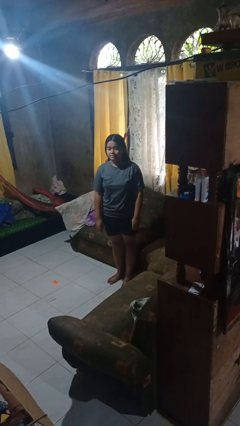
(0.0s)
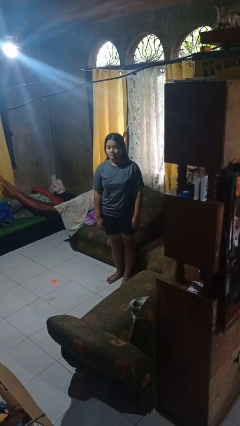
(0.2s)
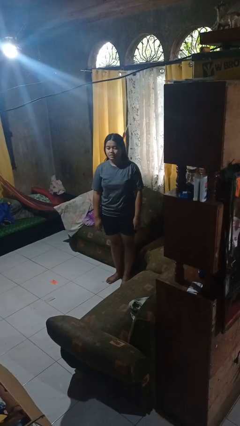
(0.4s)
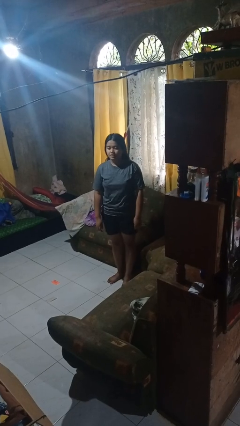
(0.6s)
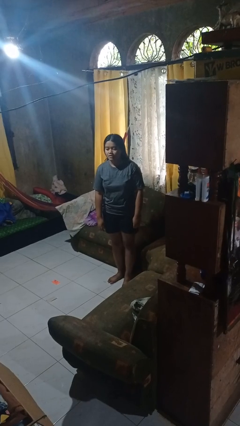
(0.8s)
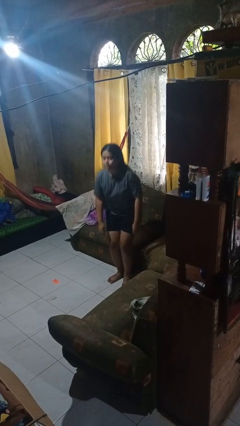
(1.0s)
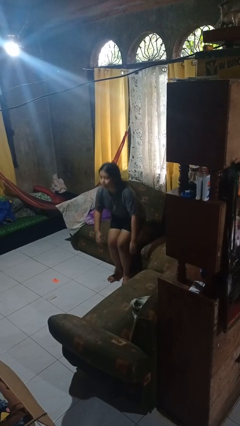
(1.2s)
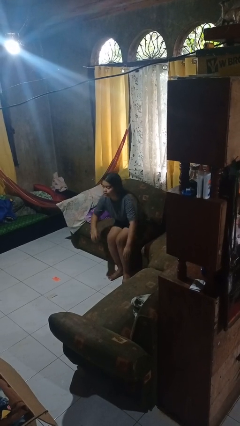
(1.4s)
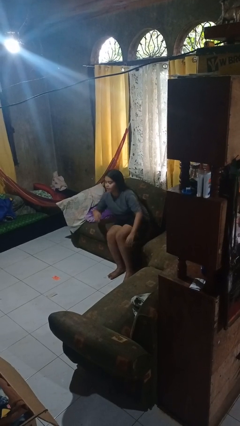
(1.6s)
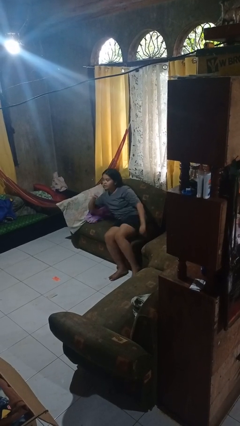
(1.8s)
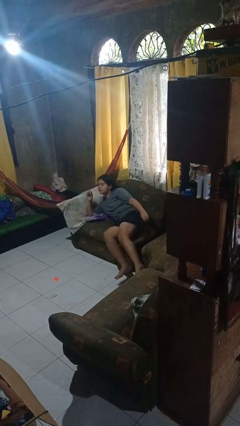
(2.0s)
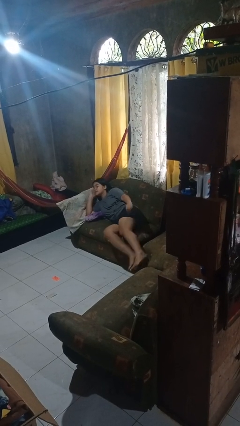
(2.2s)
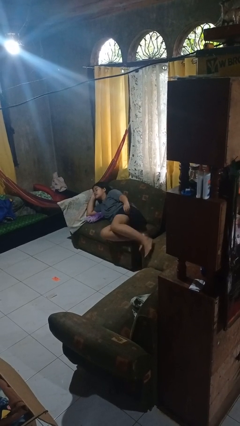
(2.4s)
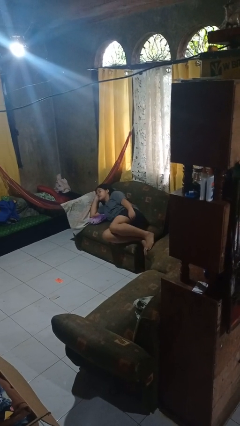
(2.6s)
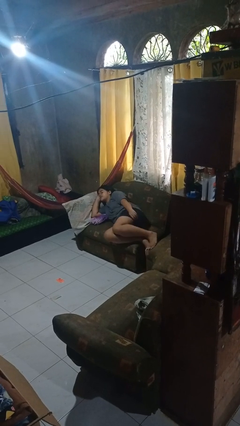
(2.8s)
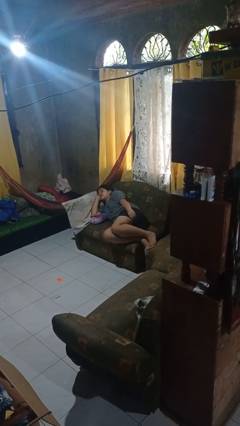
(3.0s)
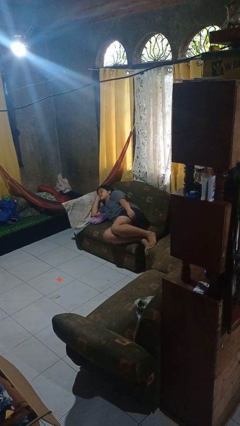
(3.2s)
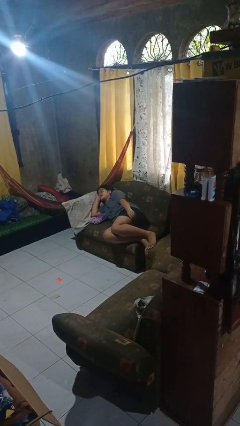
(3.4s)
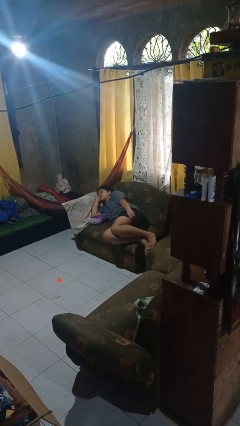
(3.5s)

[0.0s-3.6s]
person lies down on couch

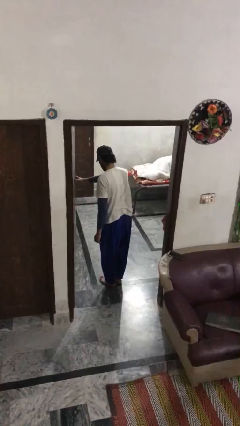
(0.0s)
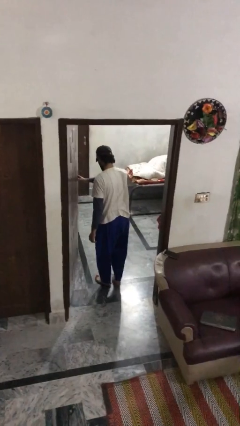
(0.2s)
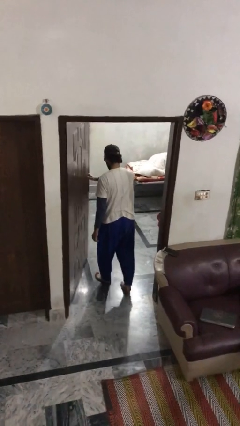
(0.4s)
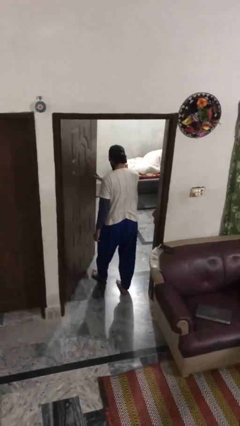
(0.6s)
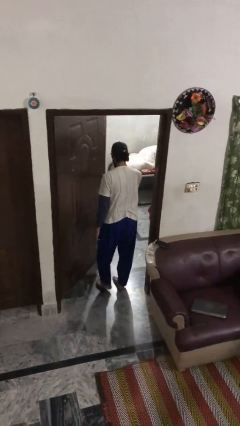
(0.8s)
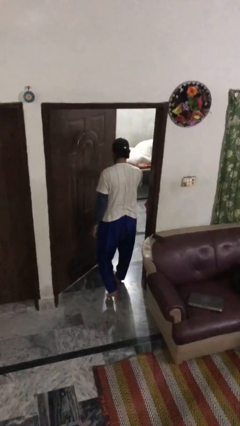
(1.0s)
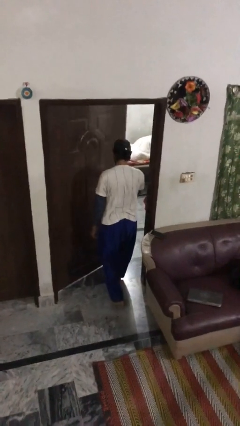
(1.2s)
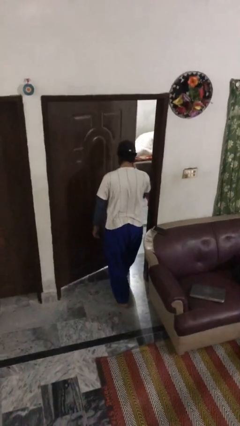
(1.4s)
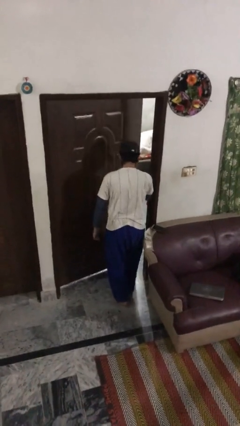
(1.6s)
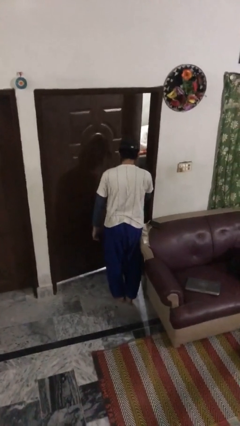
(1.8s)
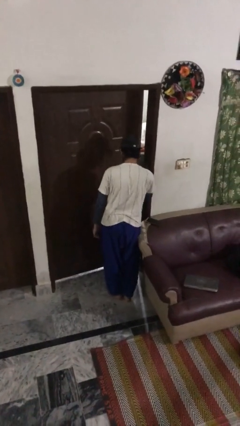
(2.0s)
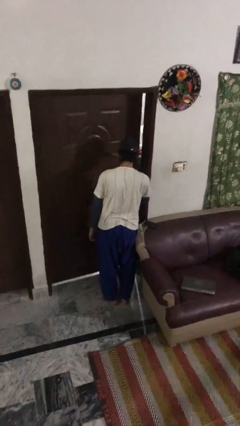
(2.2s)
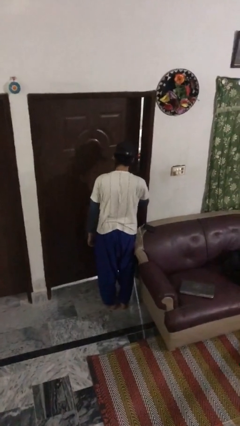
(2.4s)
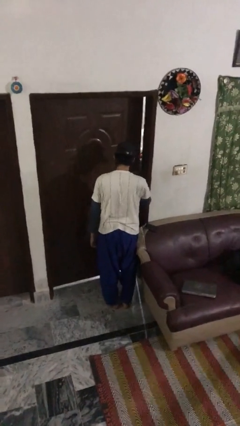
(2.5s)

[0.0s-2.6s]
person closes facility door

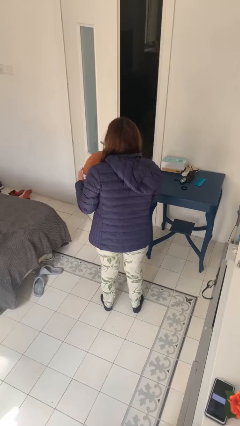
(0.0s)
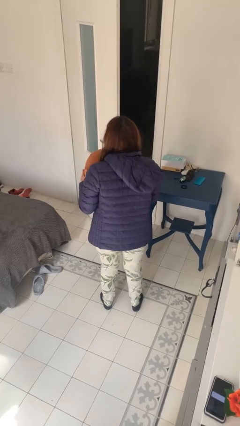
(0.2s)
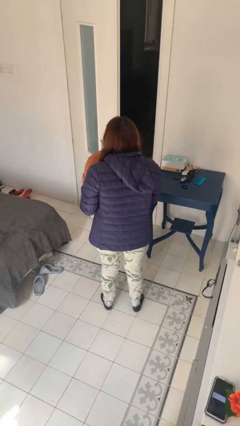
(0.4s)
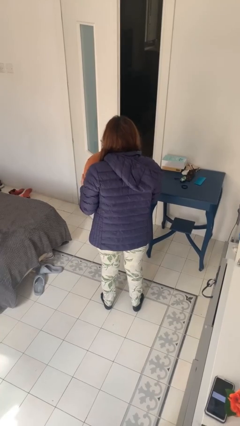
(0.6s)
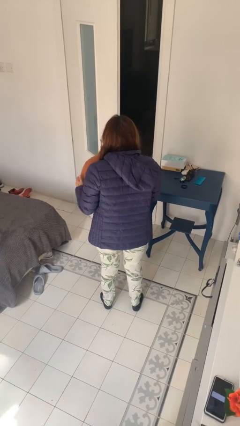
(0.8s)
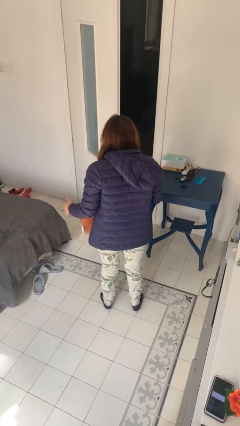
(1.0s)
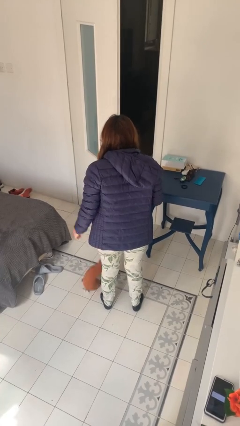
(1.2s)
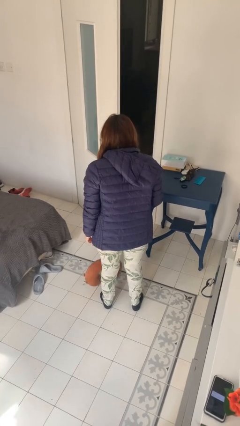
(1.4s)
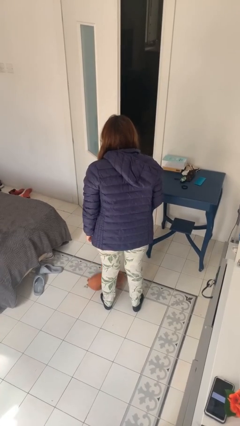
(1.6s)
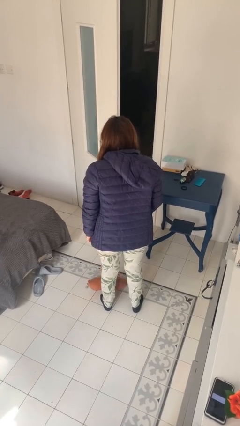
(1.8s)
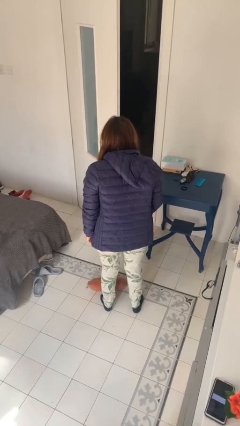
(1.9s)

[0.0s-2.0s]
person throws object into air

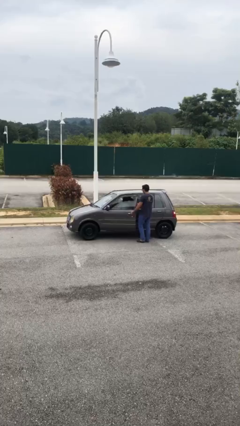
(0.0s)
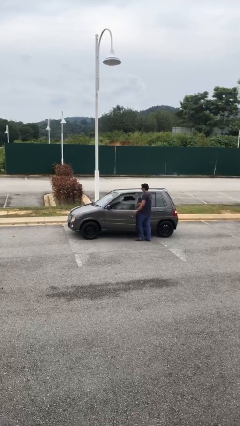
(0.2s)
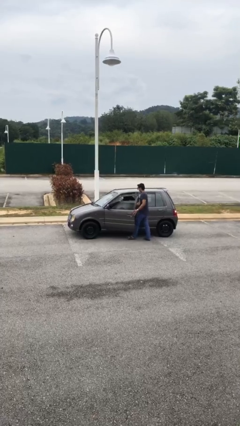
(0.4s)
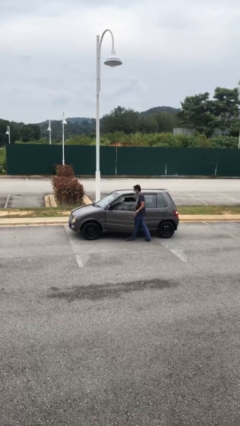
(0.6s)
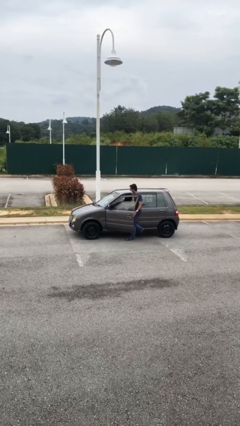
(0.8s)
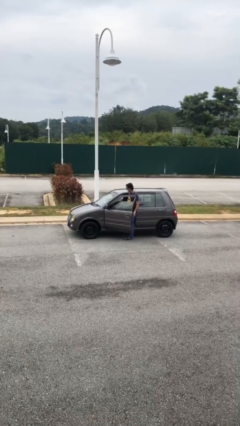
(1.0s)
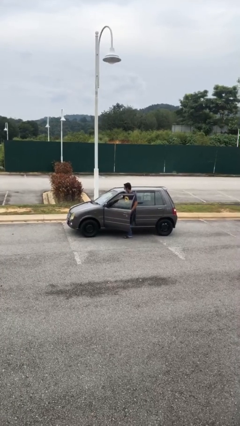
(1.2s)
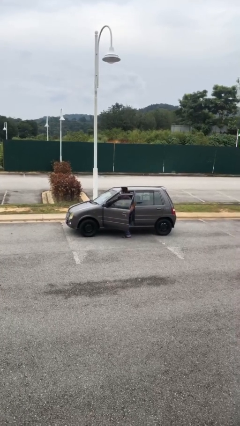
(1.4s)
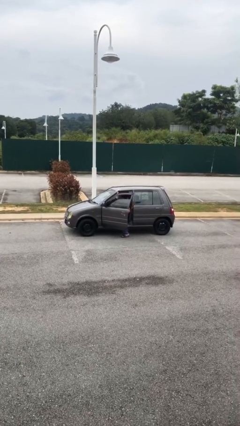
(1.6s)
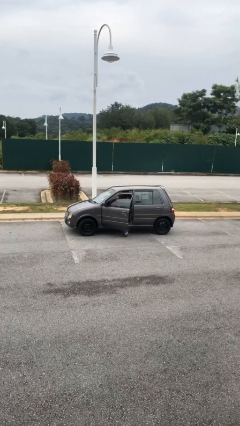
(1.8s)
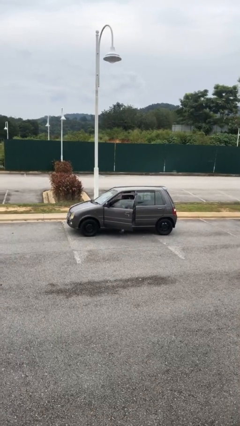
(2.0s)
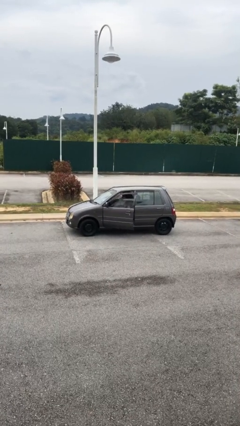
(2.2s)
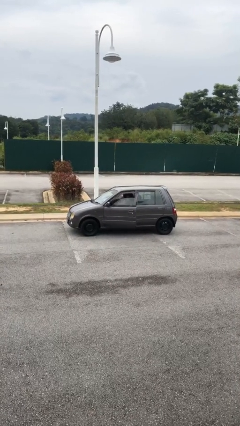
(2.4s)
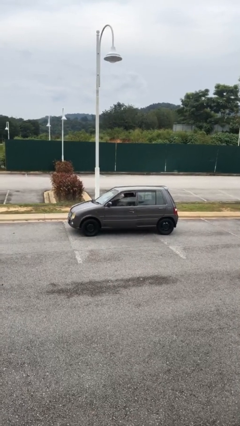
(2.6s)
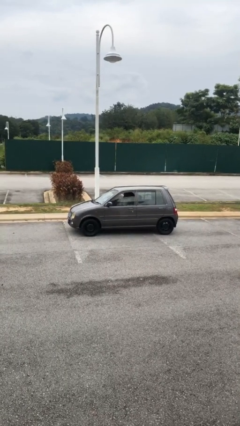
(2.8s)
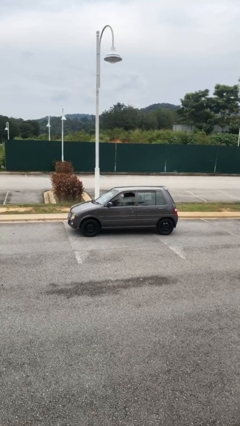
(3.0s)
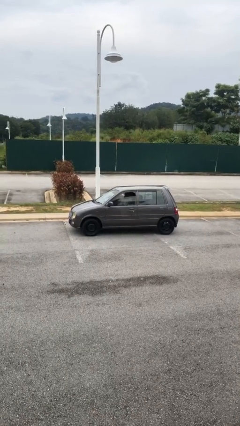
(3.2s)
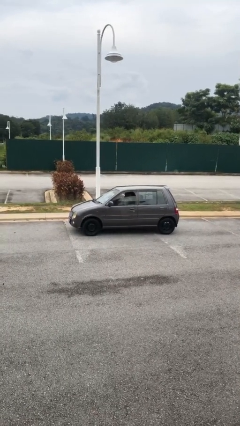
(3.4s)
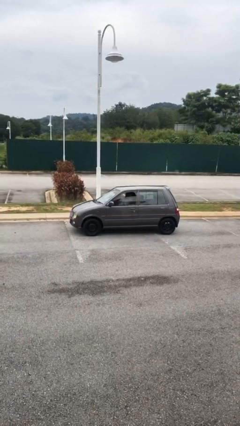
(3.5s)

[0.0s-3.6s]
car picks up person

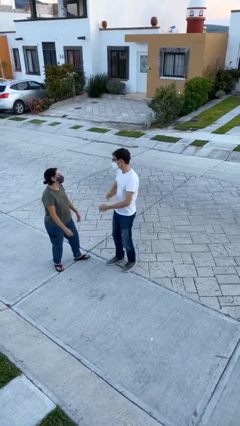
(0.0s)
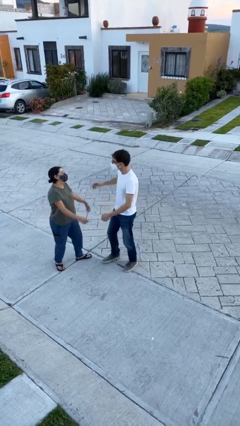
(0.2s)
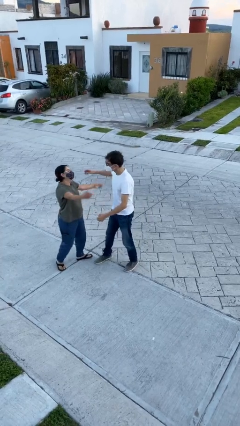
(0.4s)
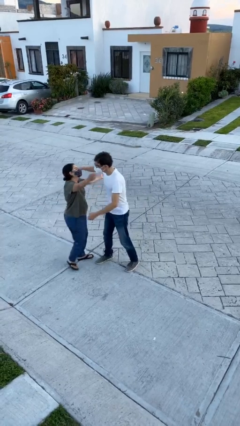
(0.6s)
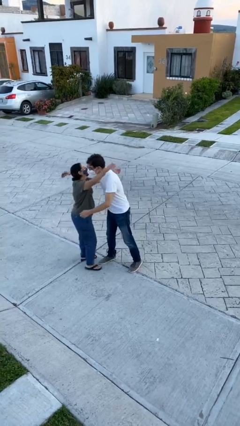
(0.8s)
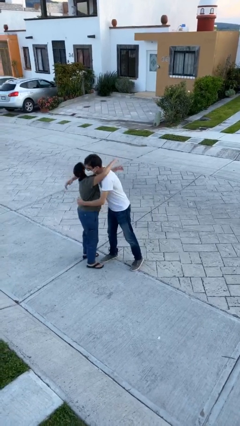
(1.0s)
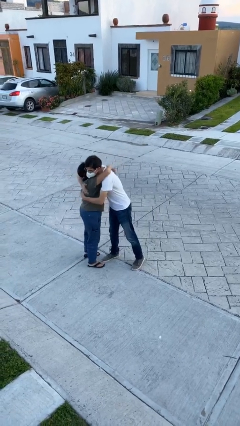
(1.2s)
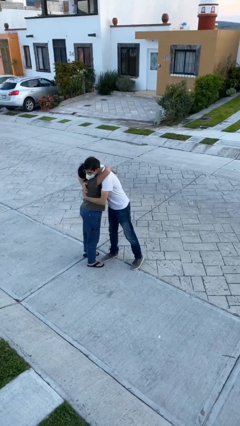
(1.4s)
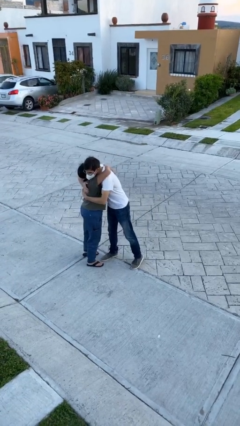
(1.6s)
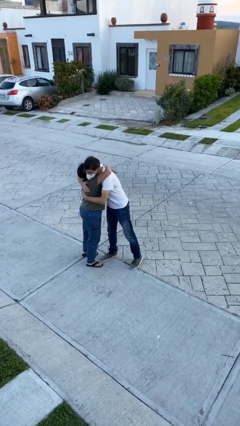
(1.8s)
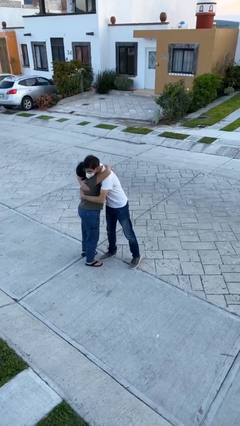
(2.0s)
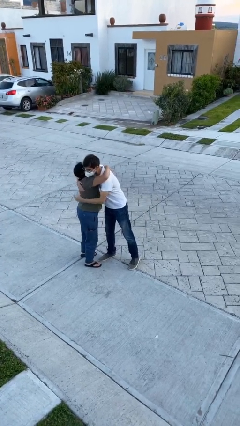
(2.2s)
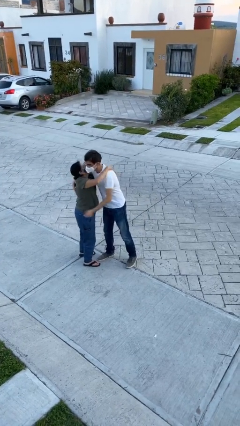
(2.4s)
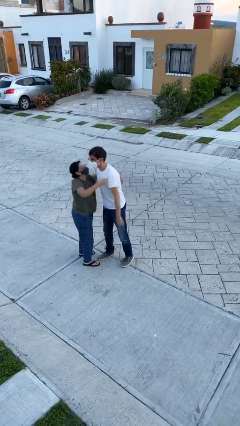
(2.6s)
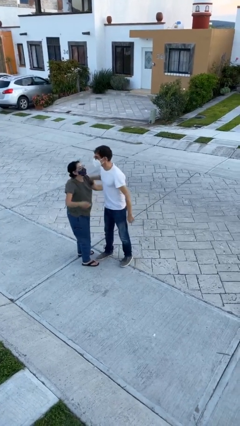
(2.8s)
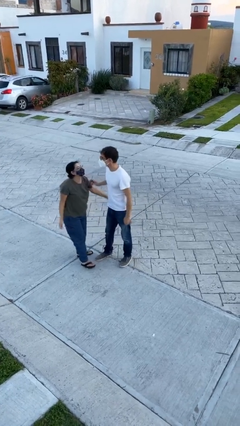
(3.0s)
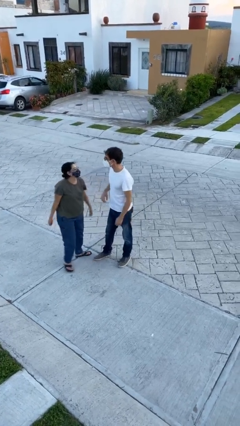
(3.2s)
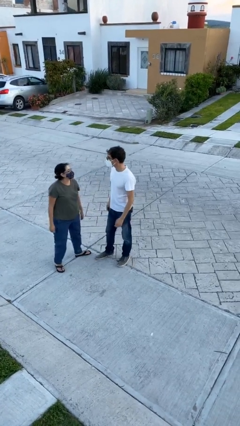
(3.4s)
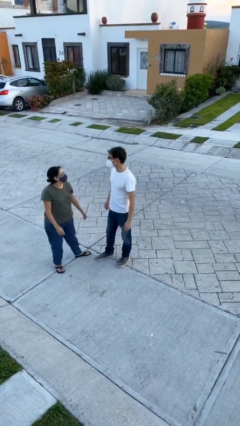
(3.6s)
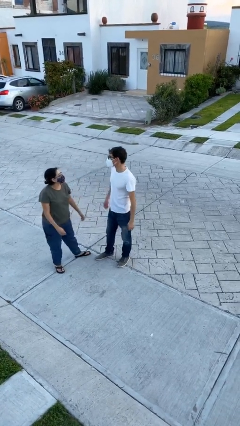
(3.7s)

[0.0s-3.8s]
person embraces person

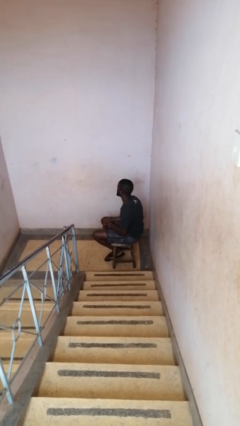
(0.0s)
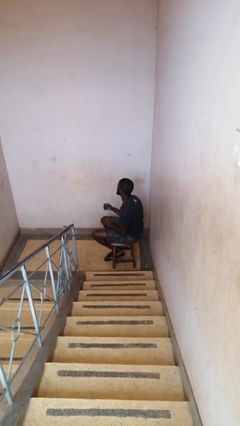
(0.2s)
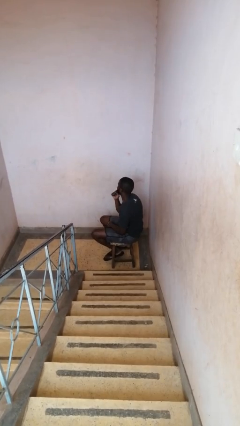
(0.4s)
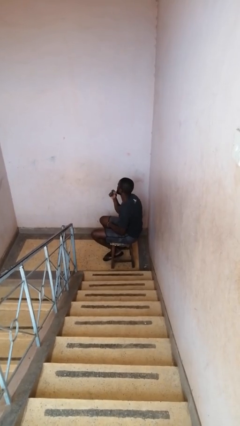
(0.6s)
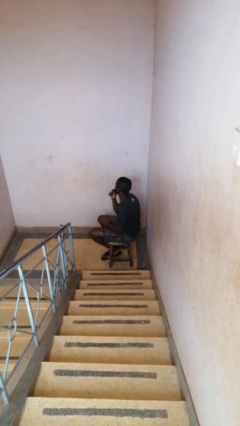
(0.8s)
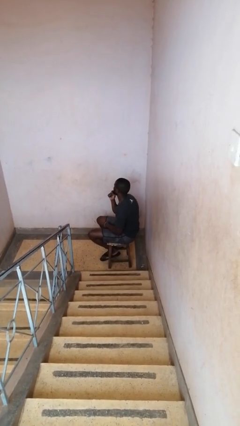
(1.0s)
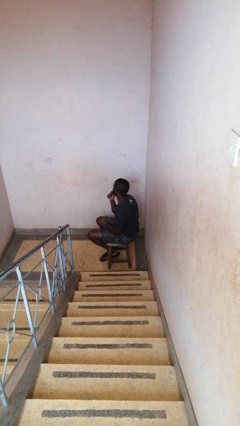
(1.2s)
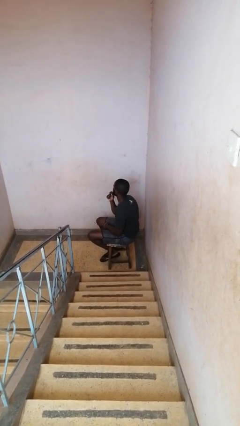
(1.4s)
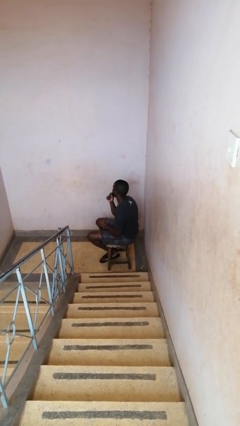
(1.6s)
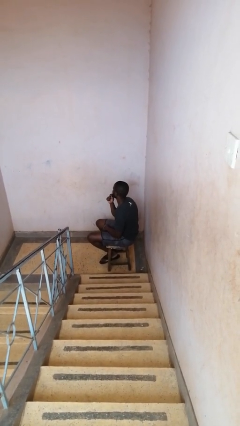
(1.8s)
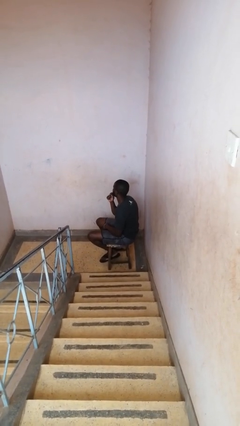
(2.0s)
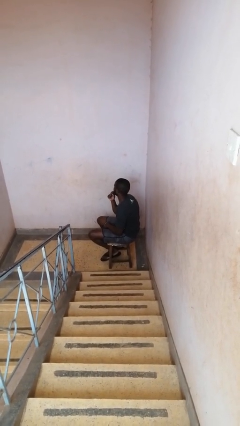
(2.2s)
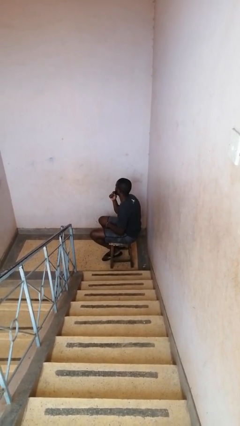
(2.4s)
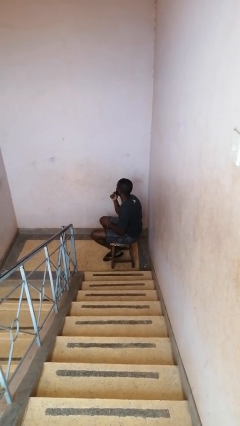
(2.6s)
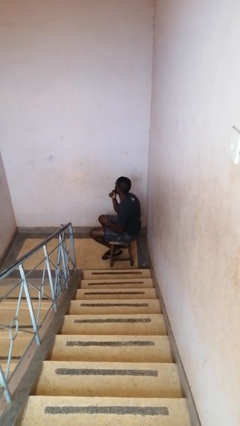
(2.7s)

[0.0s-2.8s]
person strokes chin
